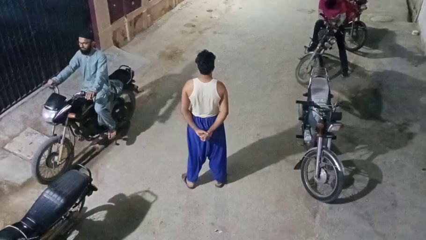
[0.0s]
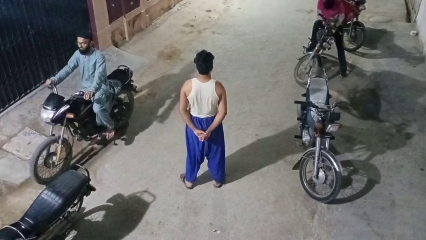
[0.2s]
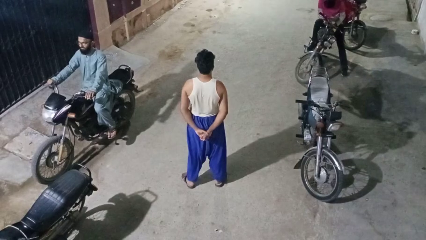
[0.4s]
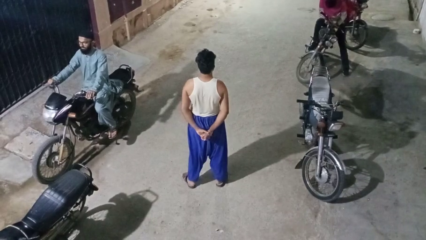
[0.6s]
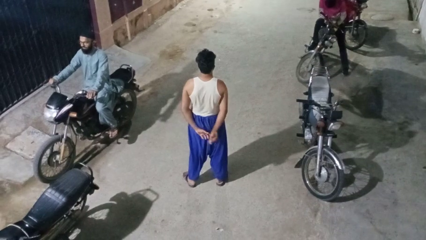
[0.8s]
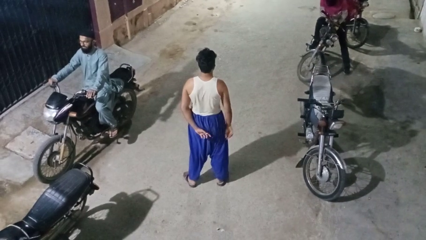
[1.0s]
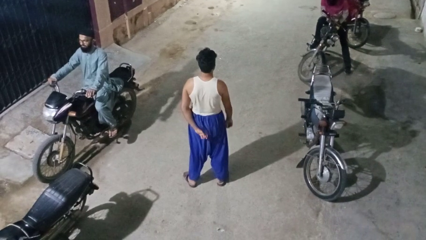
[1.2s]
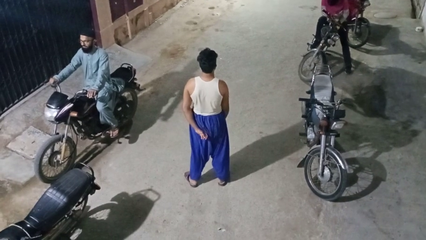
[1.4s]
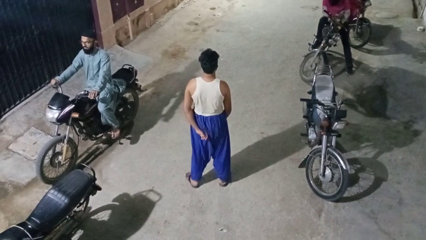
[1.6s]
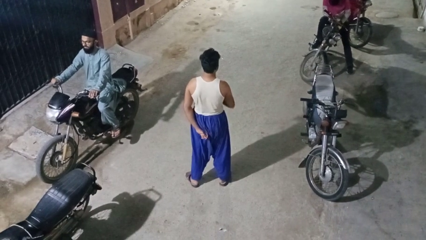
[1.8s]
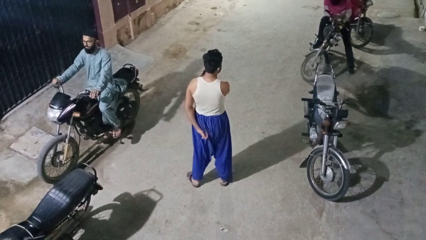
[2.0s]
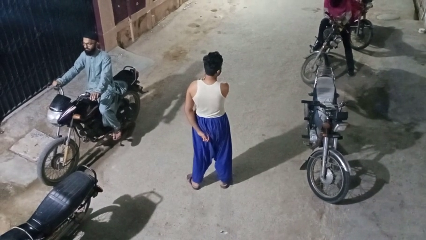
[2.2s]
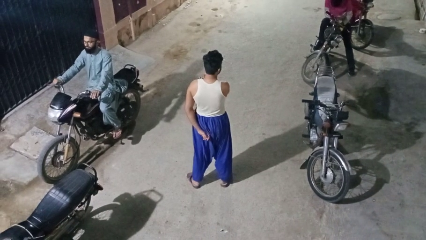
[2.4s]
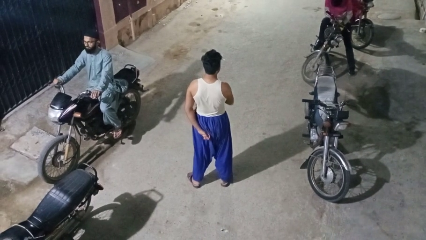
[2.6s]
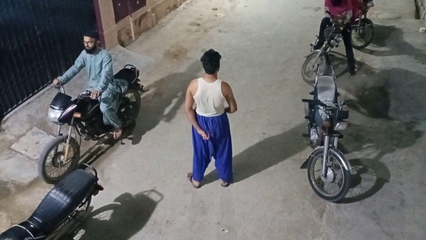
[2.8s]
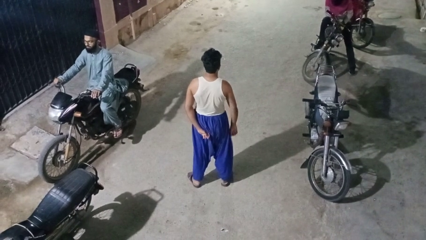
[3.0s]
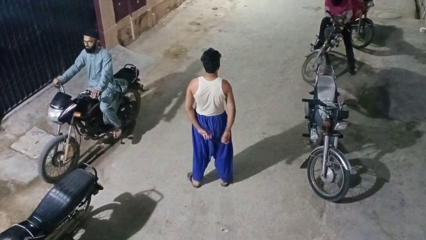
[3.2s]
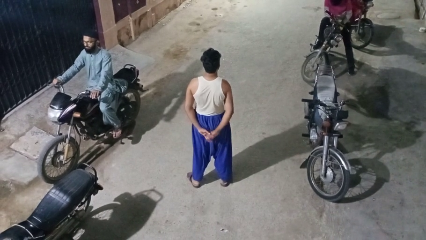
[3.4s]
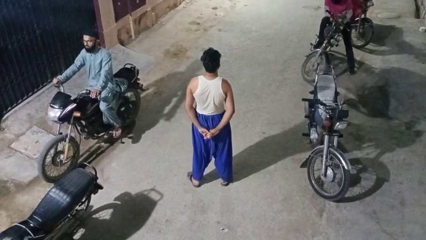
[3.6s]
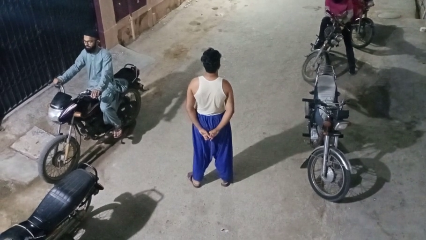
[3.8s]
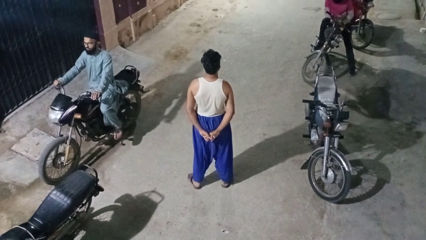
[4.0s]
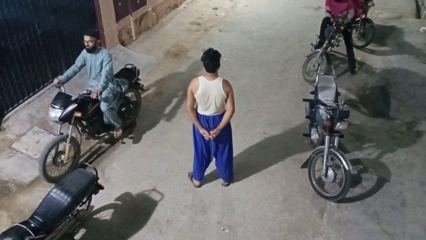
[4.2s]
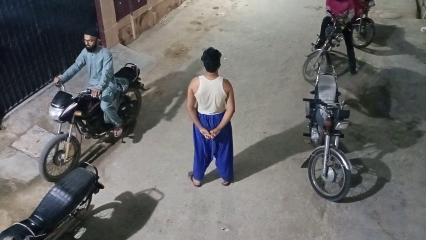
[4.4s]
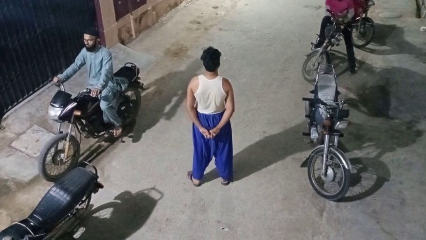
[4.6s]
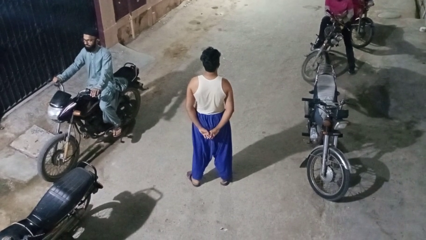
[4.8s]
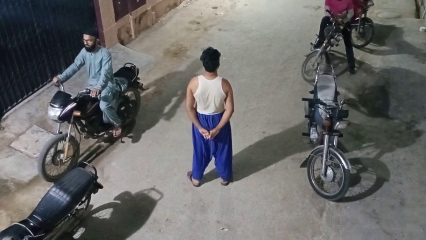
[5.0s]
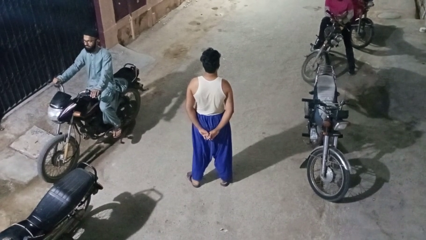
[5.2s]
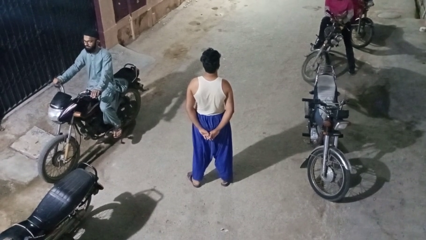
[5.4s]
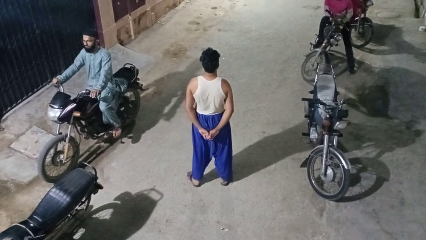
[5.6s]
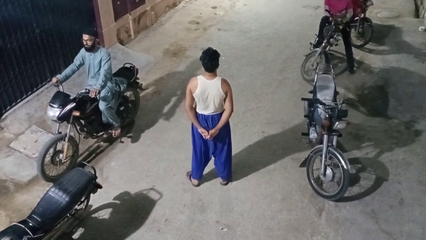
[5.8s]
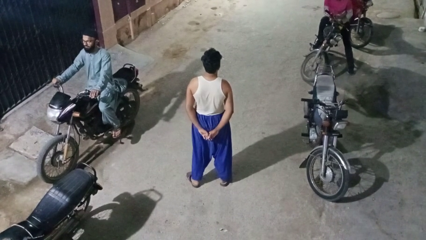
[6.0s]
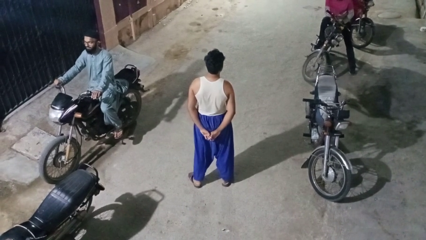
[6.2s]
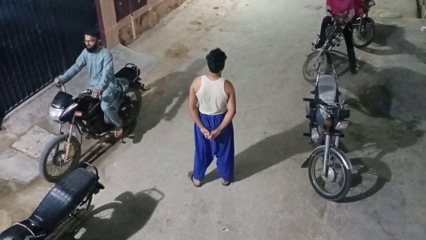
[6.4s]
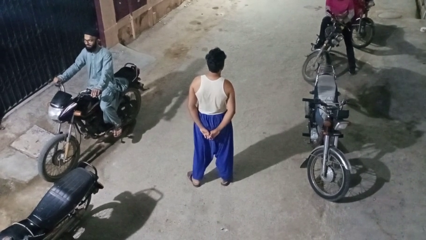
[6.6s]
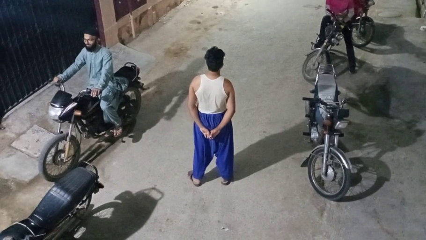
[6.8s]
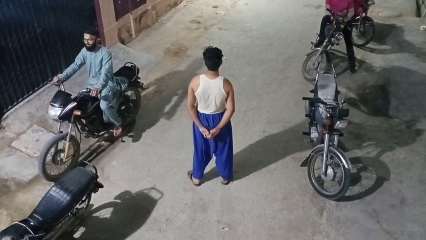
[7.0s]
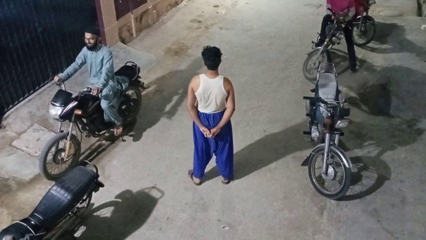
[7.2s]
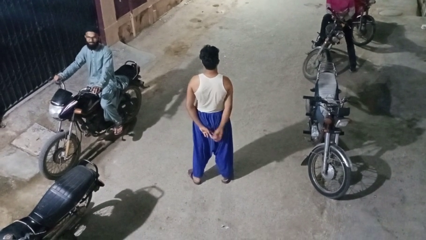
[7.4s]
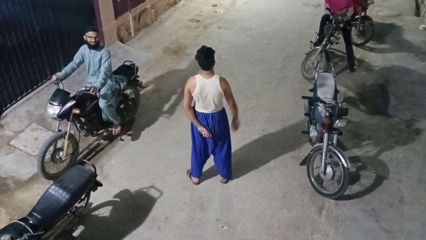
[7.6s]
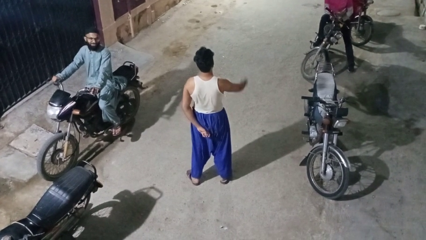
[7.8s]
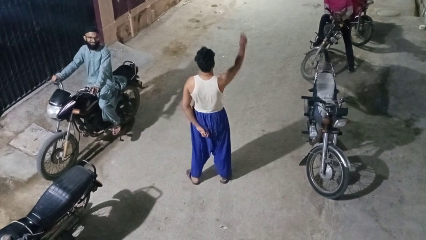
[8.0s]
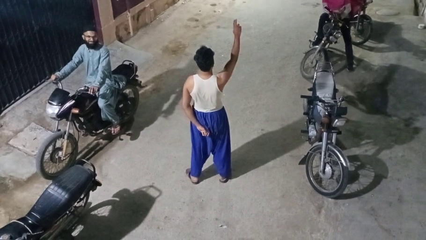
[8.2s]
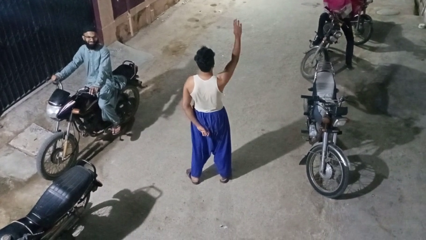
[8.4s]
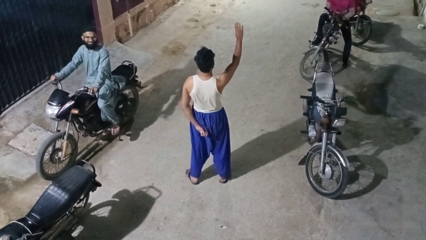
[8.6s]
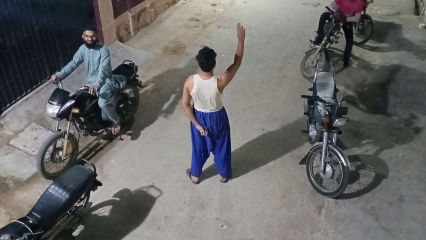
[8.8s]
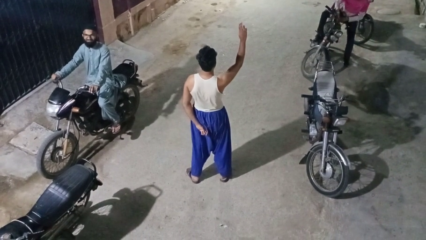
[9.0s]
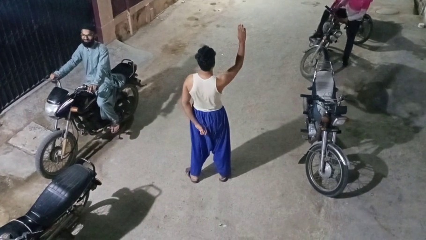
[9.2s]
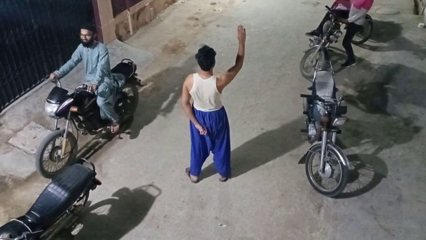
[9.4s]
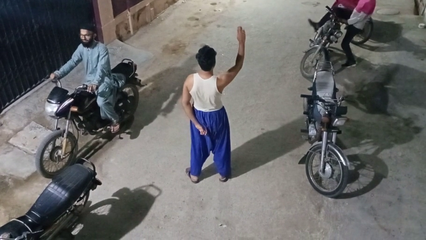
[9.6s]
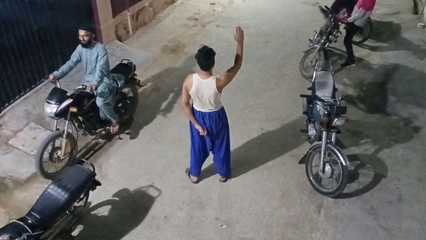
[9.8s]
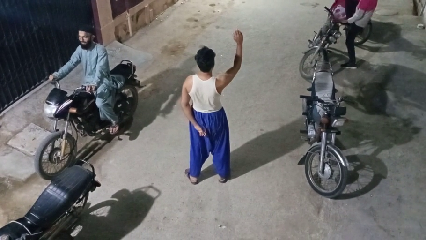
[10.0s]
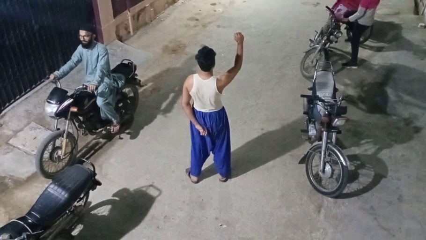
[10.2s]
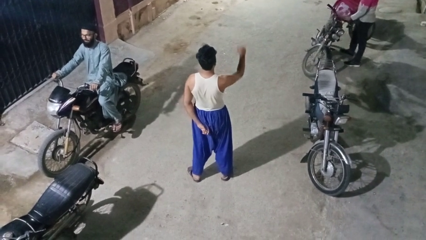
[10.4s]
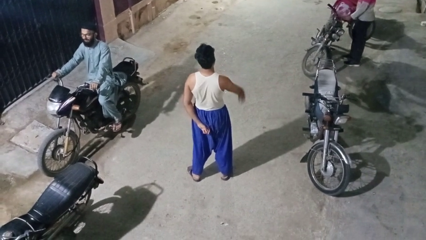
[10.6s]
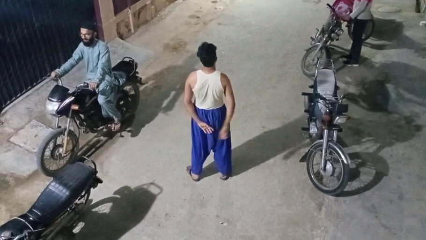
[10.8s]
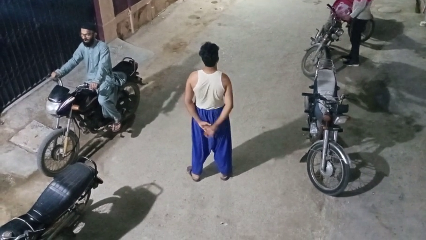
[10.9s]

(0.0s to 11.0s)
person points at person

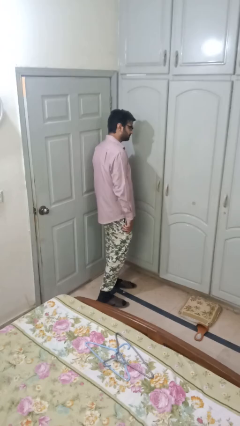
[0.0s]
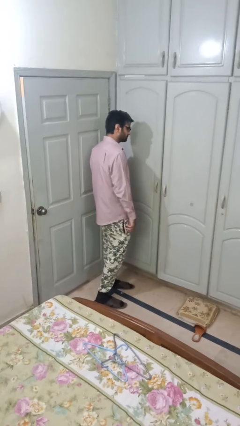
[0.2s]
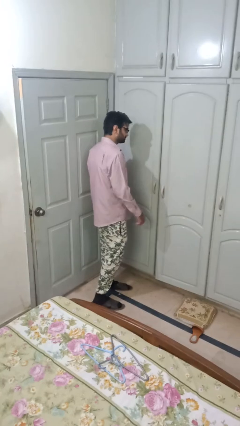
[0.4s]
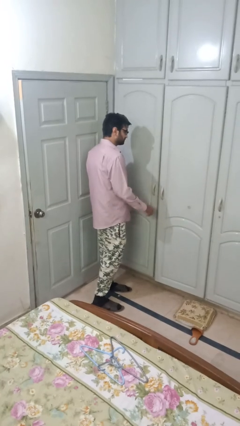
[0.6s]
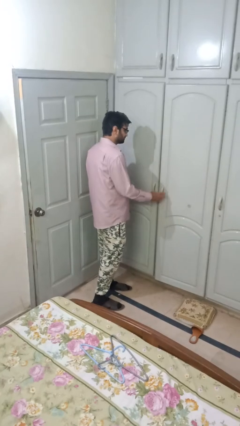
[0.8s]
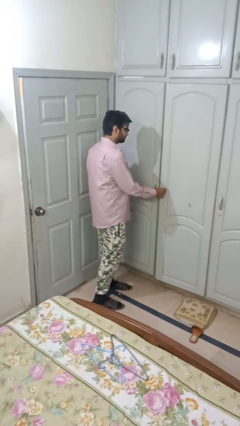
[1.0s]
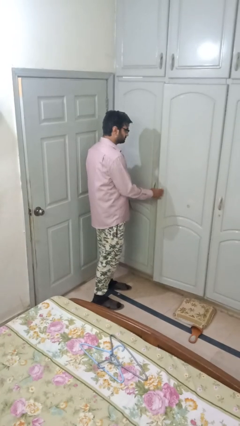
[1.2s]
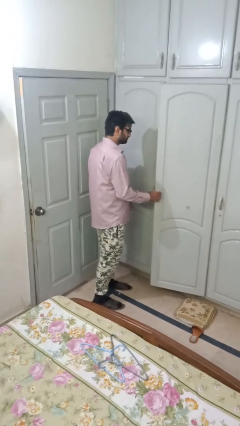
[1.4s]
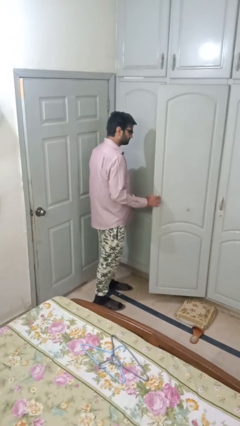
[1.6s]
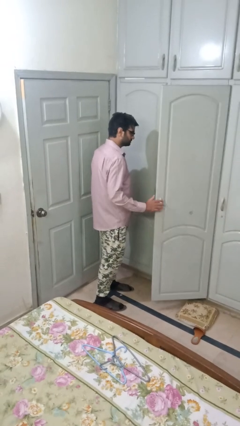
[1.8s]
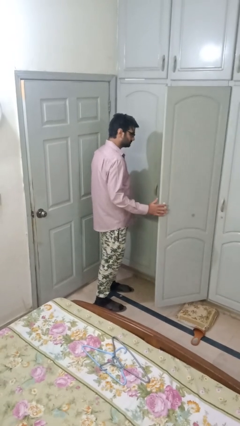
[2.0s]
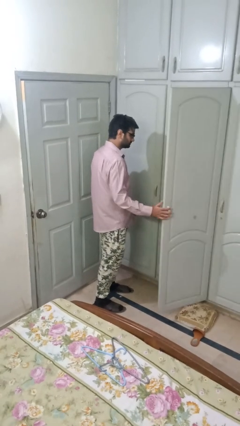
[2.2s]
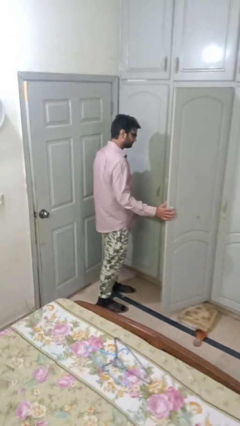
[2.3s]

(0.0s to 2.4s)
person opens closet door

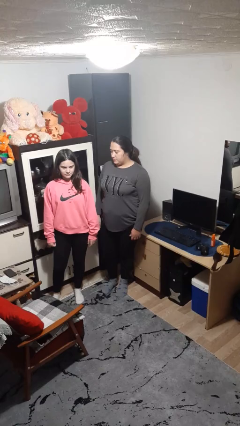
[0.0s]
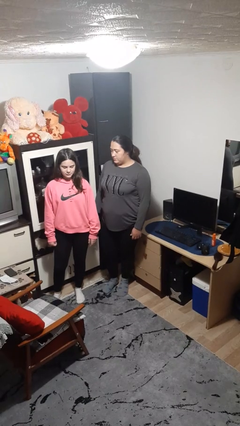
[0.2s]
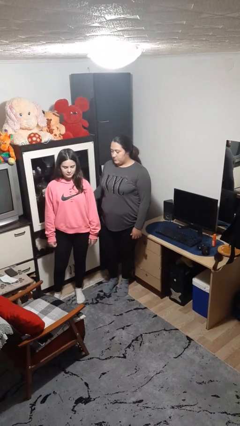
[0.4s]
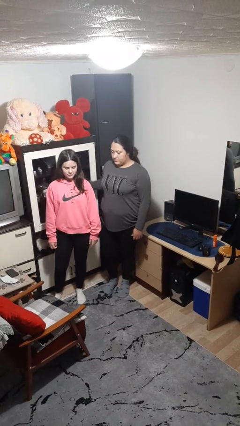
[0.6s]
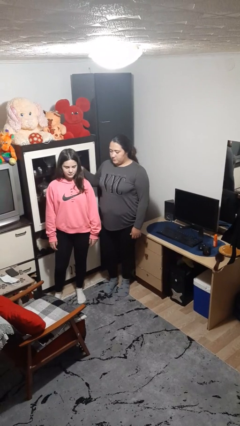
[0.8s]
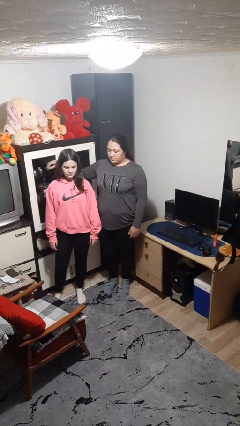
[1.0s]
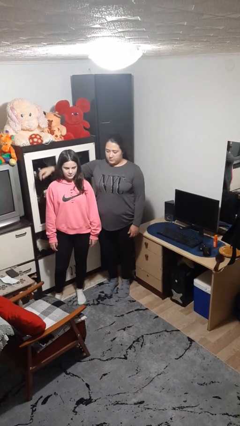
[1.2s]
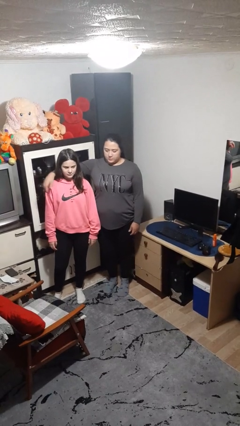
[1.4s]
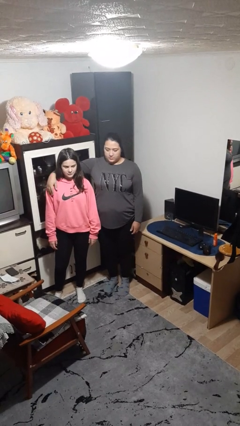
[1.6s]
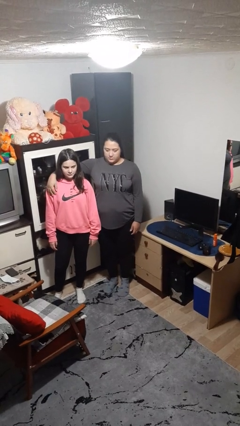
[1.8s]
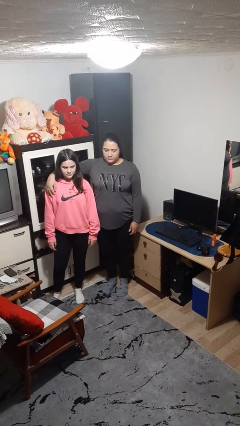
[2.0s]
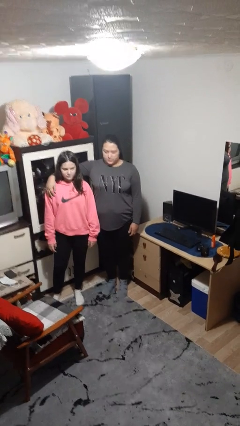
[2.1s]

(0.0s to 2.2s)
person hugs person from side

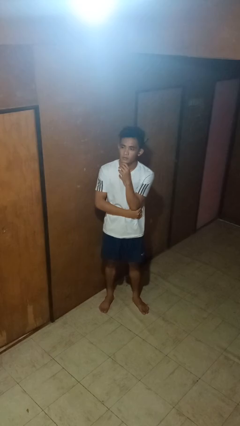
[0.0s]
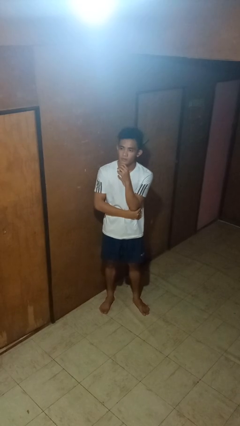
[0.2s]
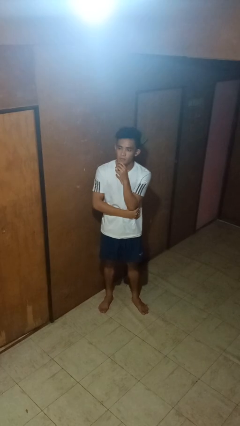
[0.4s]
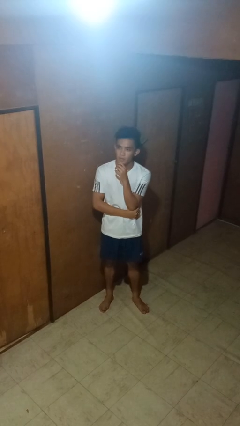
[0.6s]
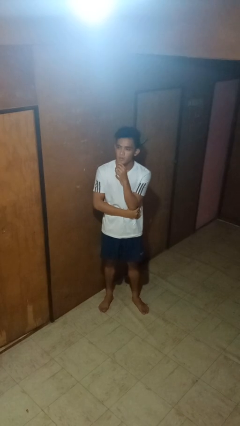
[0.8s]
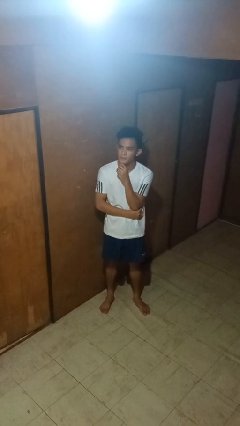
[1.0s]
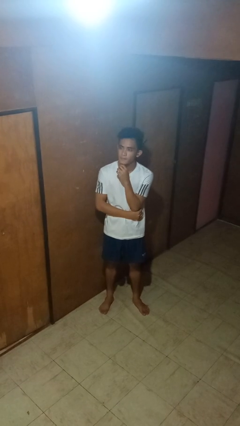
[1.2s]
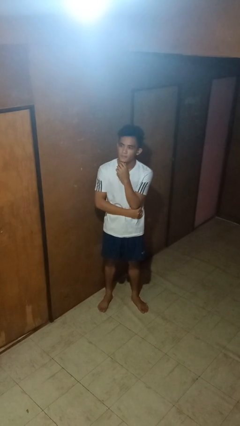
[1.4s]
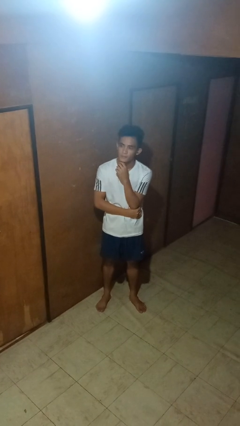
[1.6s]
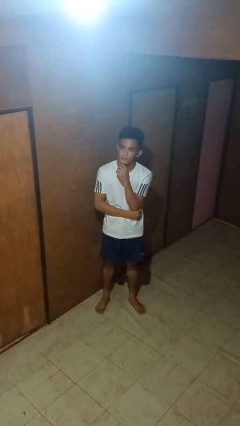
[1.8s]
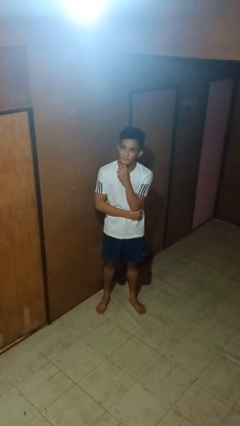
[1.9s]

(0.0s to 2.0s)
person strokes chin

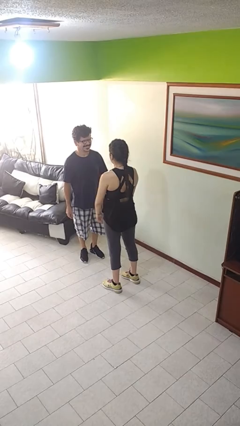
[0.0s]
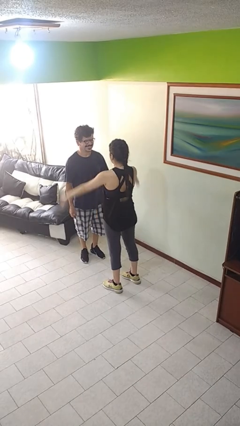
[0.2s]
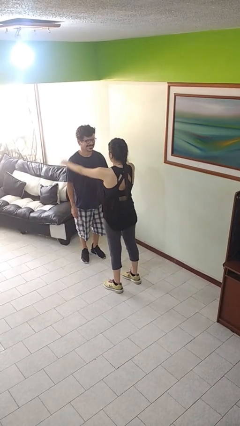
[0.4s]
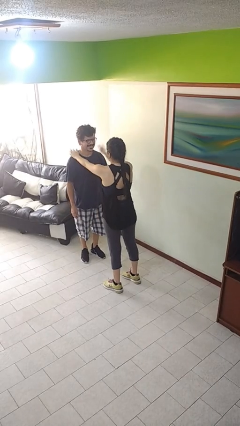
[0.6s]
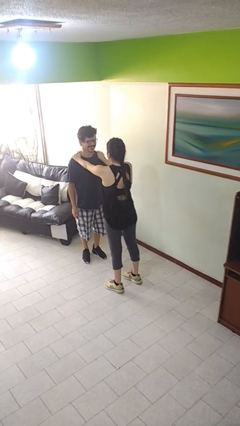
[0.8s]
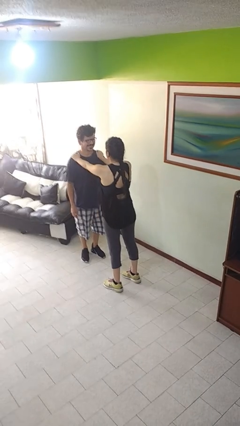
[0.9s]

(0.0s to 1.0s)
person grabs person by shoulder
